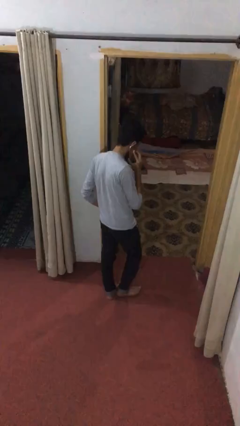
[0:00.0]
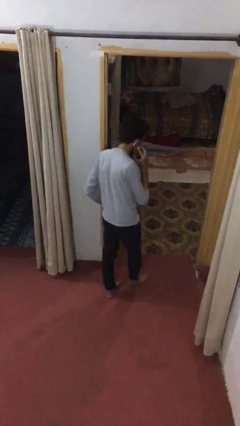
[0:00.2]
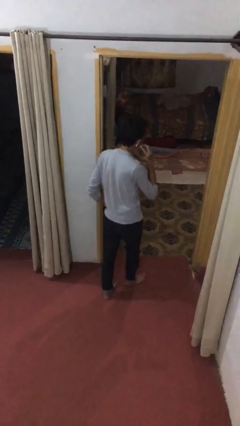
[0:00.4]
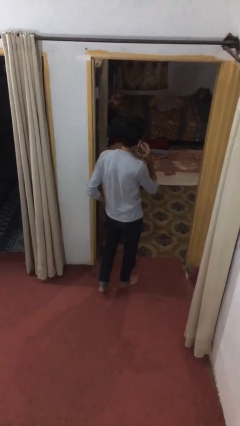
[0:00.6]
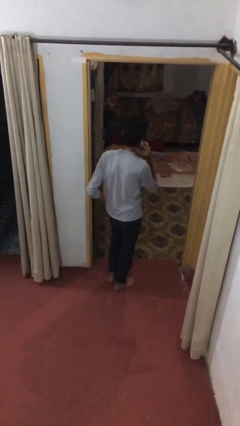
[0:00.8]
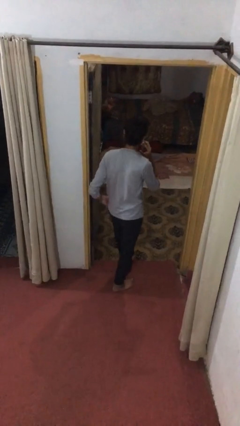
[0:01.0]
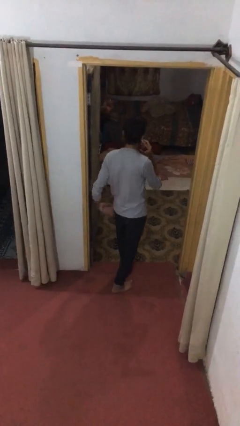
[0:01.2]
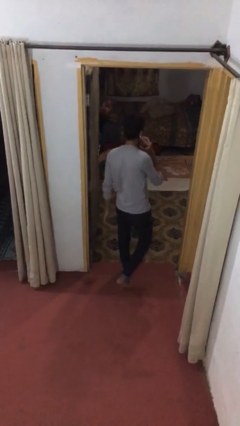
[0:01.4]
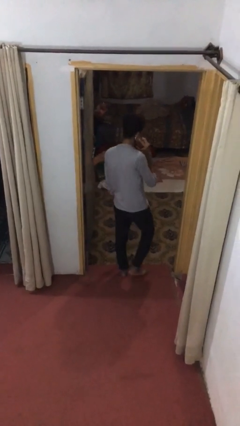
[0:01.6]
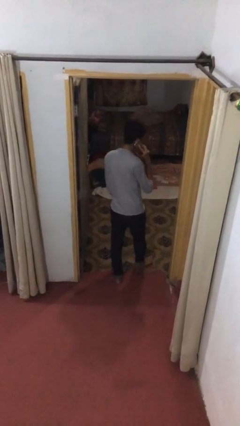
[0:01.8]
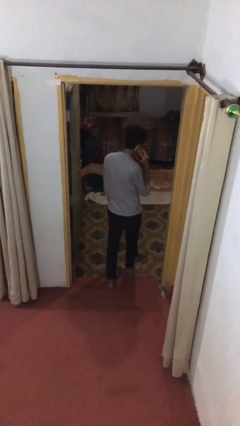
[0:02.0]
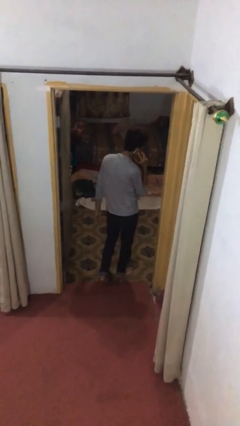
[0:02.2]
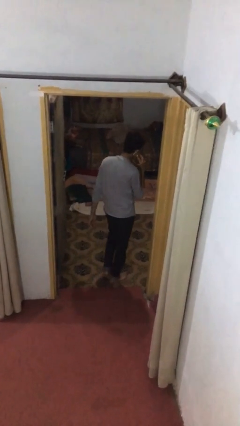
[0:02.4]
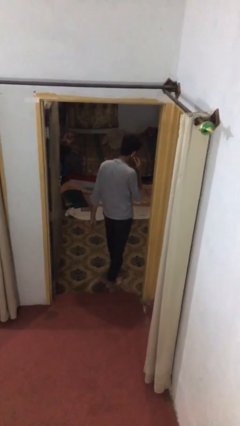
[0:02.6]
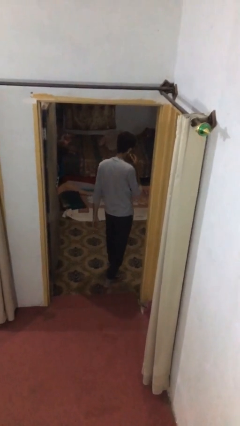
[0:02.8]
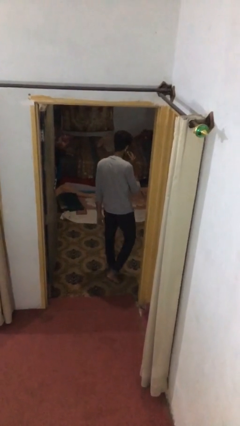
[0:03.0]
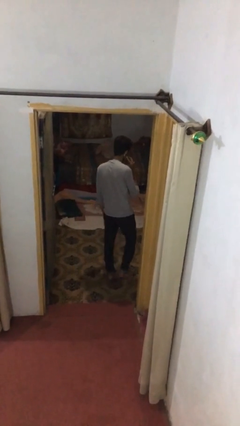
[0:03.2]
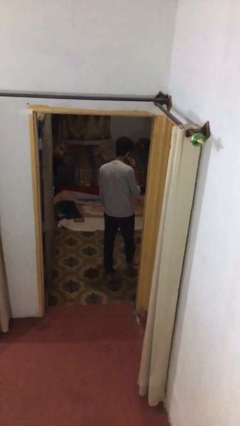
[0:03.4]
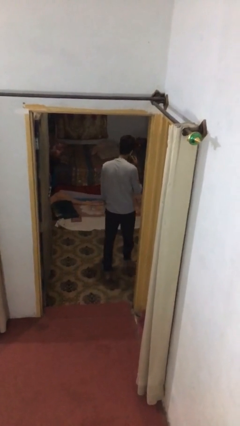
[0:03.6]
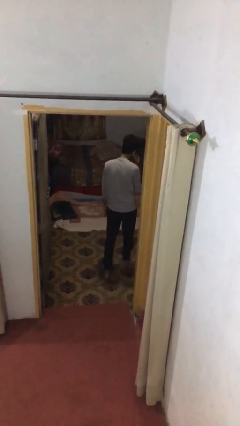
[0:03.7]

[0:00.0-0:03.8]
person exits scene through structure

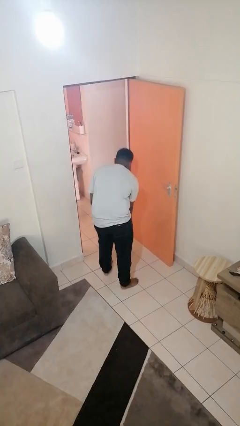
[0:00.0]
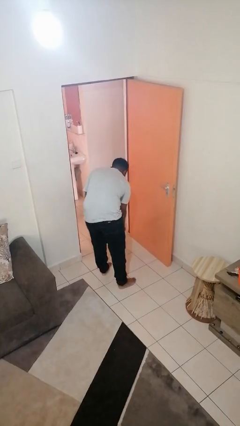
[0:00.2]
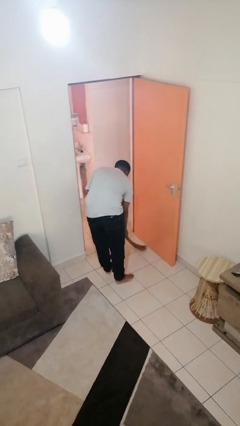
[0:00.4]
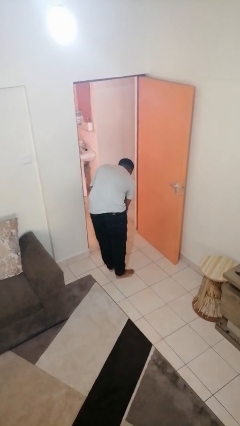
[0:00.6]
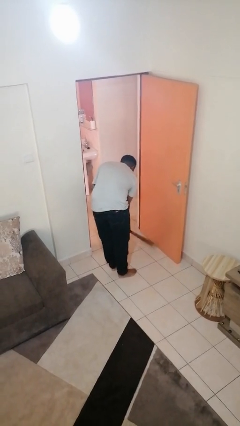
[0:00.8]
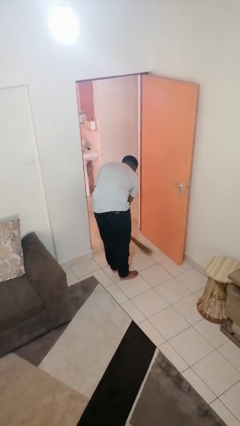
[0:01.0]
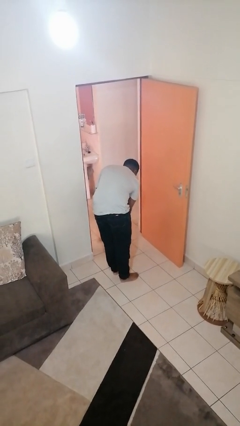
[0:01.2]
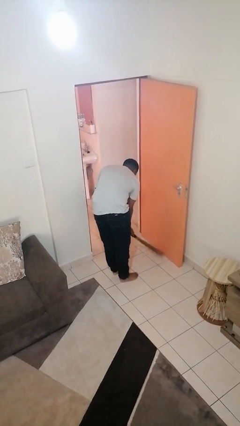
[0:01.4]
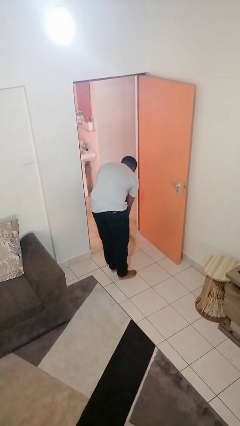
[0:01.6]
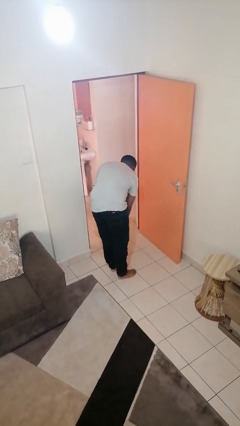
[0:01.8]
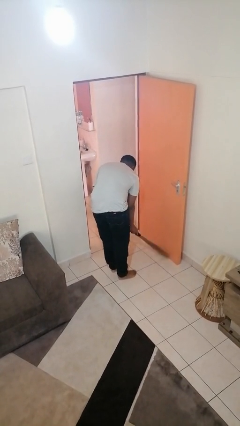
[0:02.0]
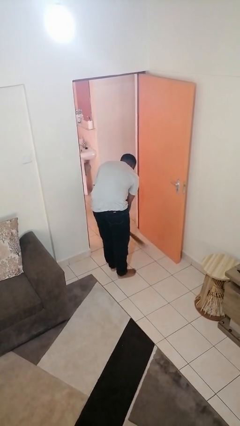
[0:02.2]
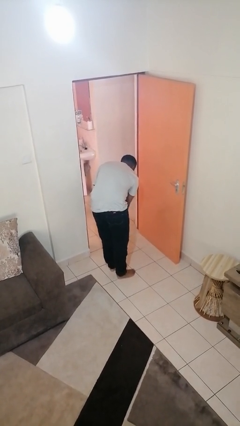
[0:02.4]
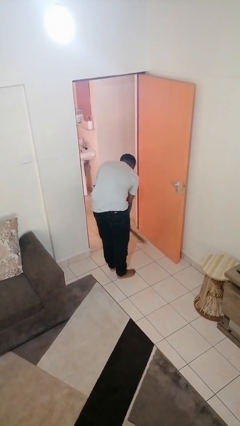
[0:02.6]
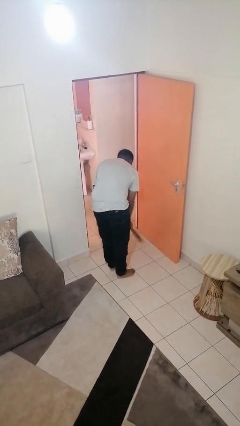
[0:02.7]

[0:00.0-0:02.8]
person sweeps floor

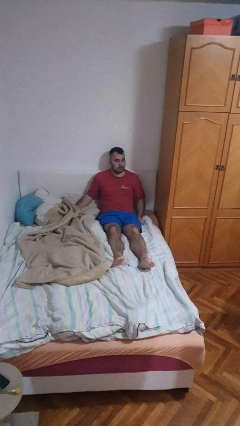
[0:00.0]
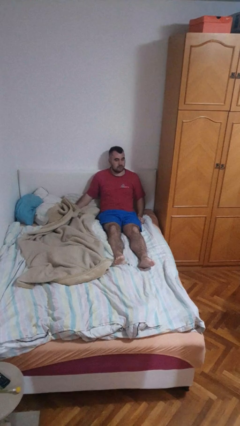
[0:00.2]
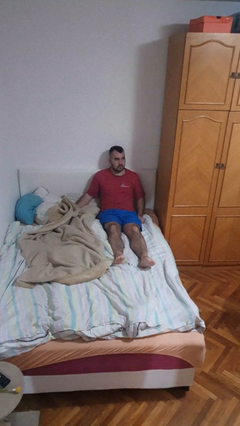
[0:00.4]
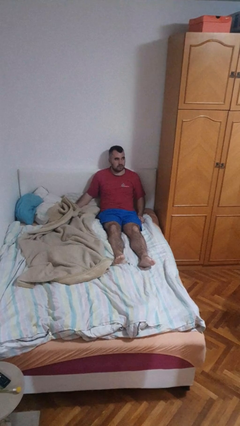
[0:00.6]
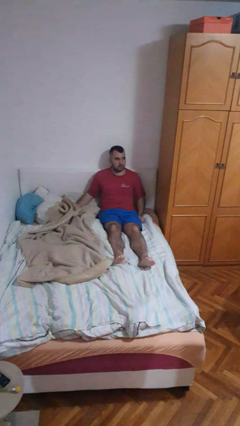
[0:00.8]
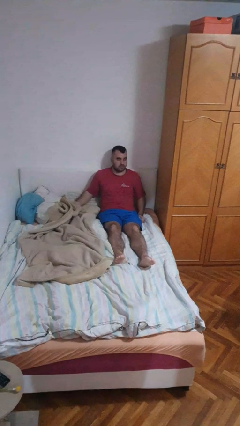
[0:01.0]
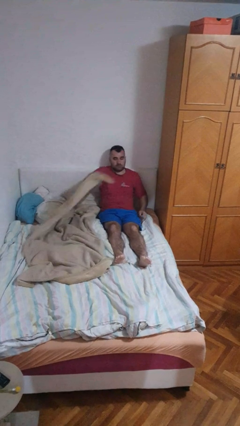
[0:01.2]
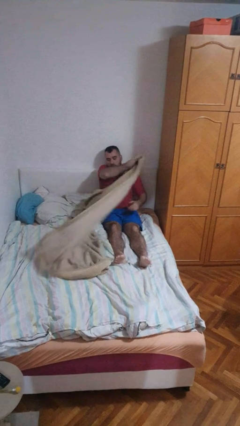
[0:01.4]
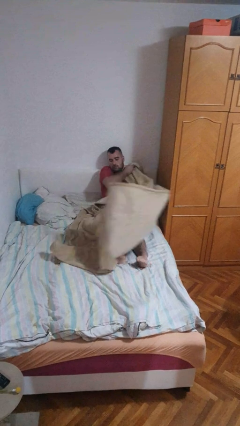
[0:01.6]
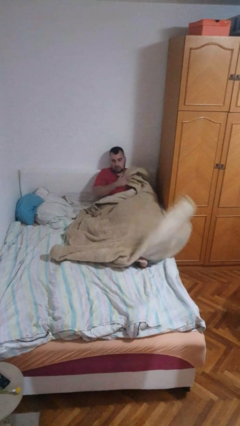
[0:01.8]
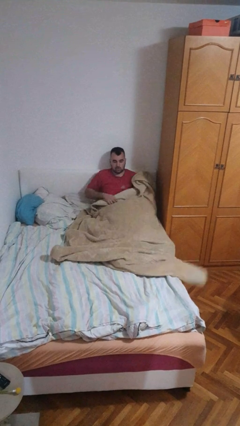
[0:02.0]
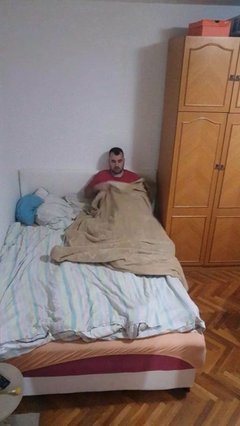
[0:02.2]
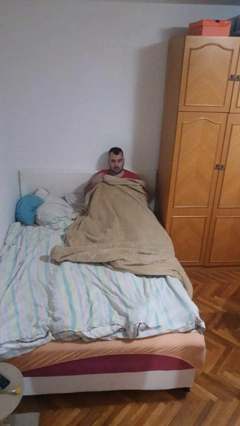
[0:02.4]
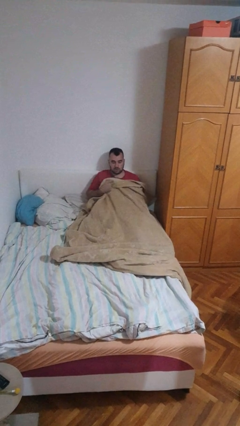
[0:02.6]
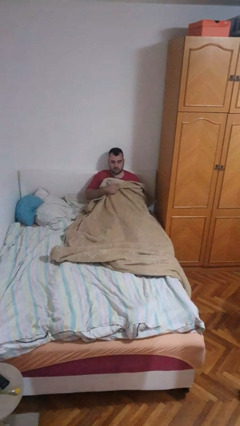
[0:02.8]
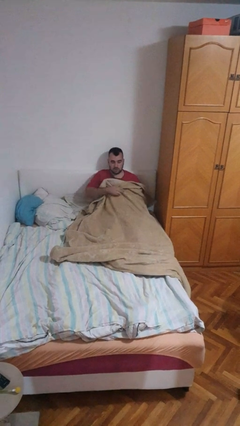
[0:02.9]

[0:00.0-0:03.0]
person covers with blanket

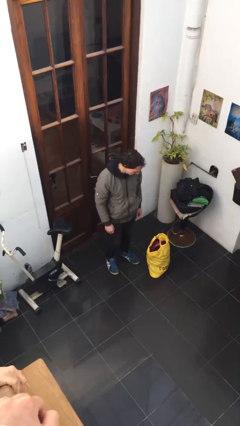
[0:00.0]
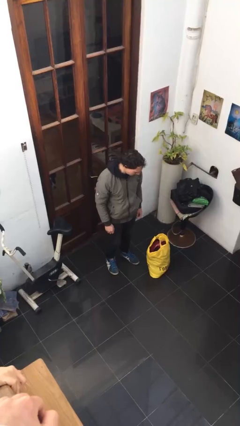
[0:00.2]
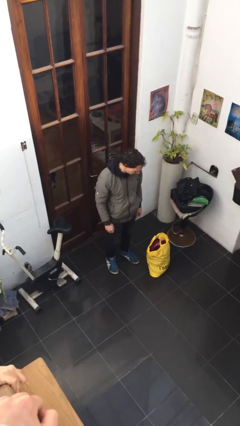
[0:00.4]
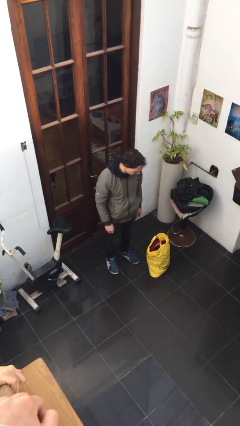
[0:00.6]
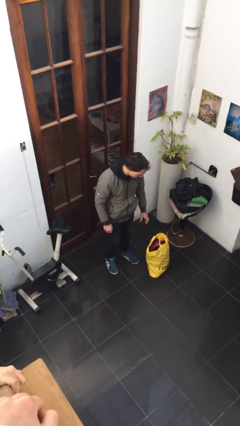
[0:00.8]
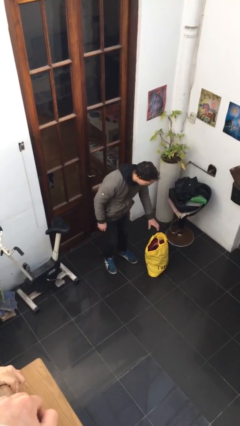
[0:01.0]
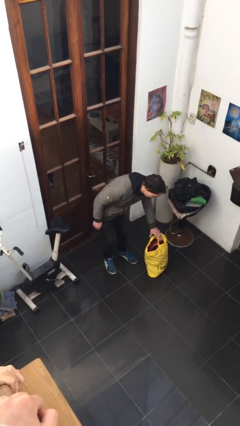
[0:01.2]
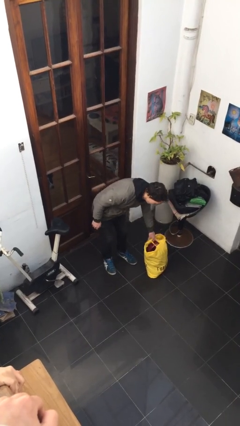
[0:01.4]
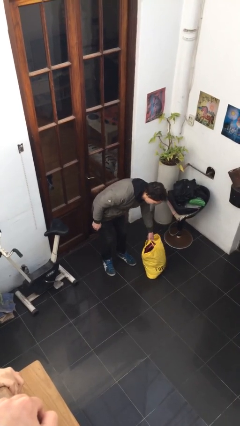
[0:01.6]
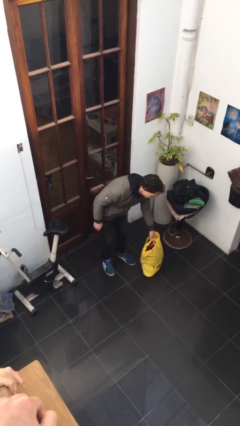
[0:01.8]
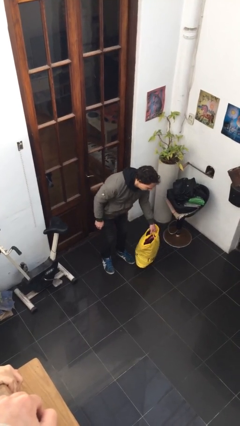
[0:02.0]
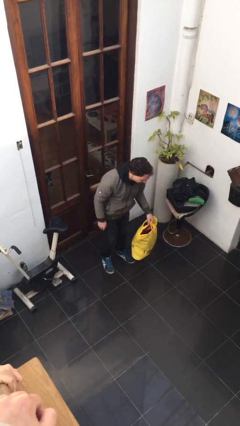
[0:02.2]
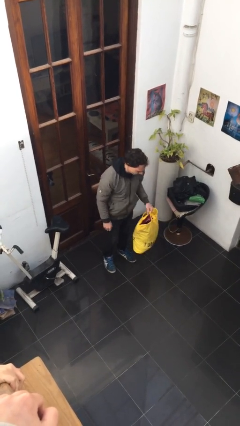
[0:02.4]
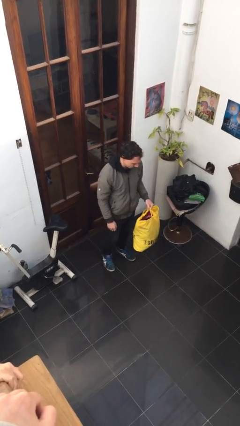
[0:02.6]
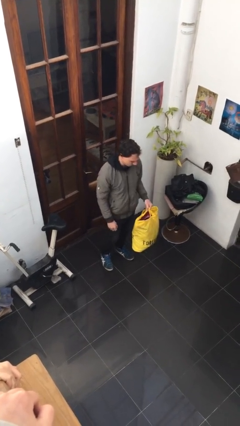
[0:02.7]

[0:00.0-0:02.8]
person picks up object from floor

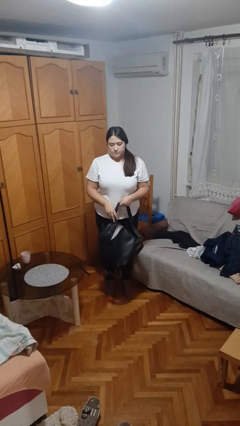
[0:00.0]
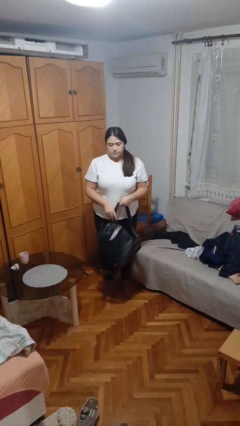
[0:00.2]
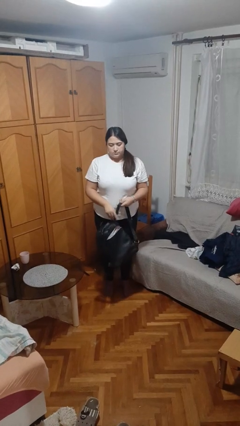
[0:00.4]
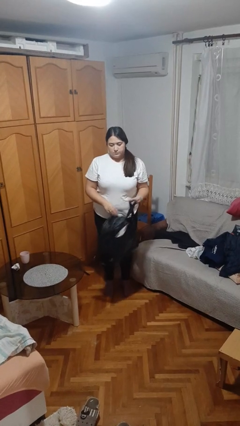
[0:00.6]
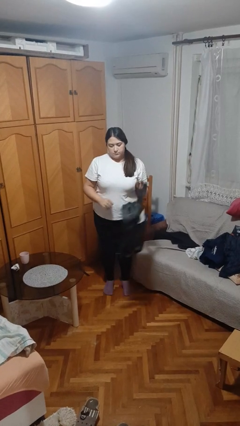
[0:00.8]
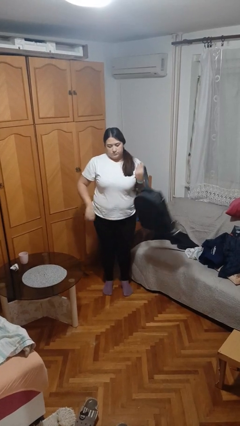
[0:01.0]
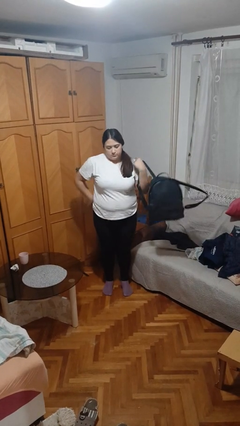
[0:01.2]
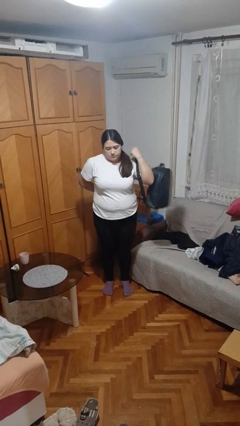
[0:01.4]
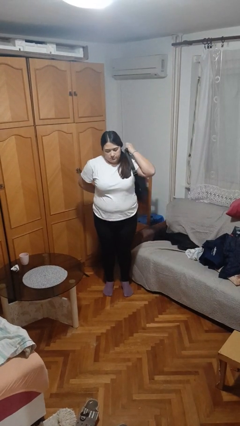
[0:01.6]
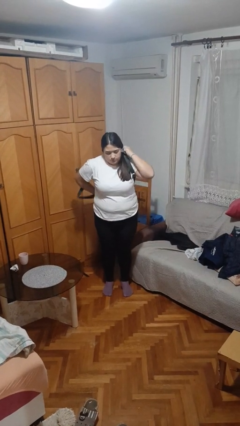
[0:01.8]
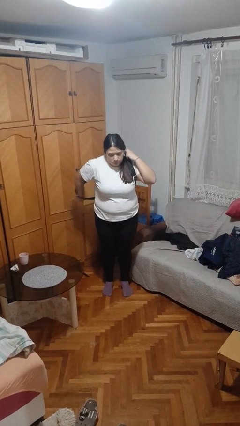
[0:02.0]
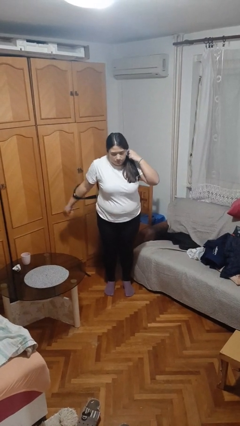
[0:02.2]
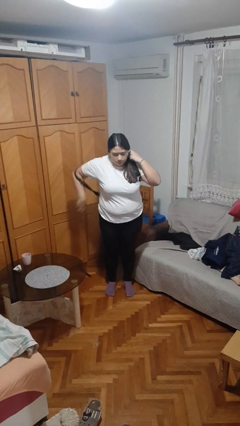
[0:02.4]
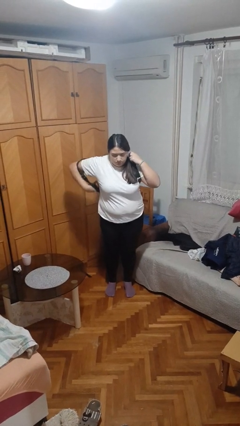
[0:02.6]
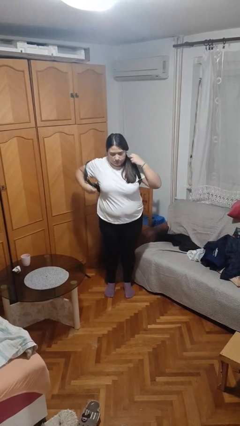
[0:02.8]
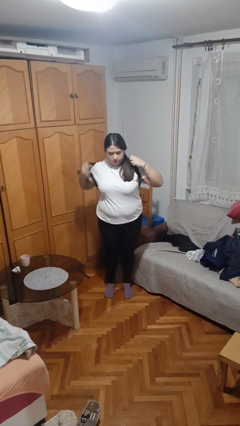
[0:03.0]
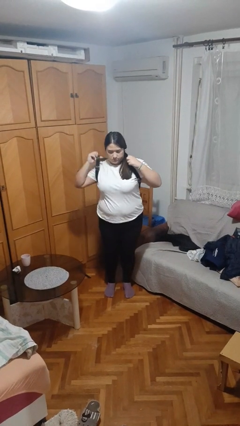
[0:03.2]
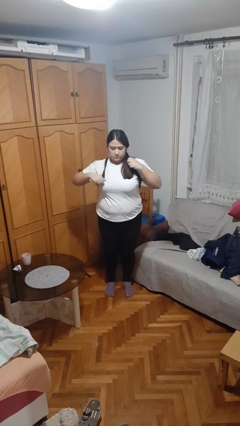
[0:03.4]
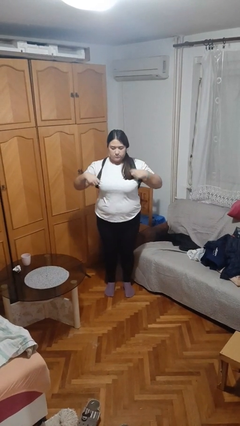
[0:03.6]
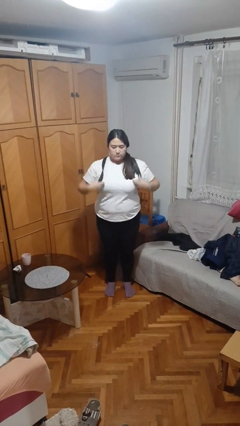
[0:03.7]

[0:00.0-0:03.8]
person puts on backpack

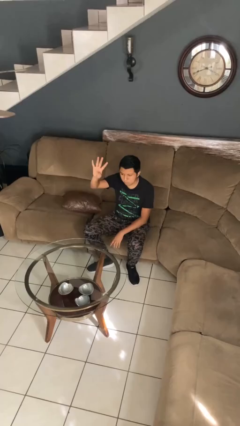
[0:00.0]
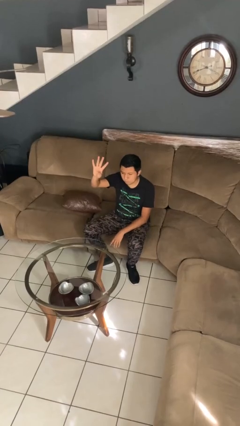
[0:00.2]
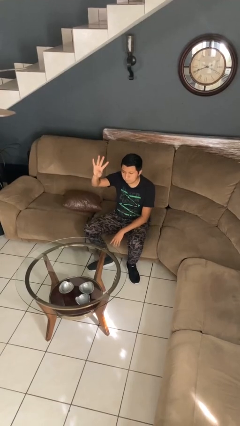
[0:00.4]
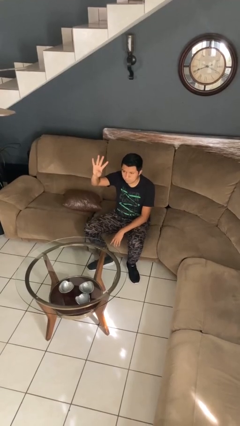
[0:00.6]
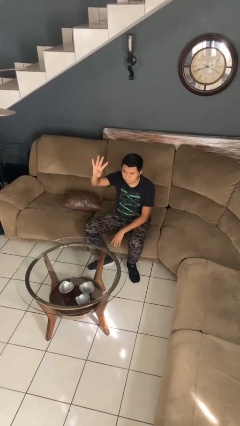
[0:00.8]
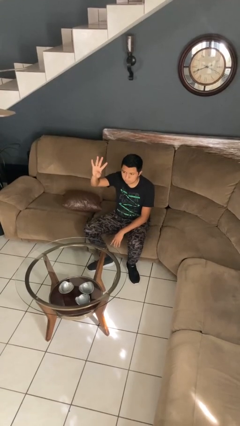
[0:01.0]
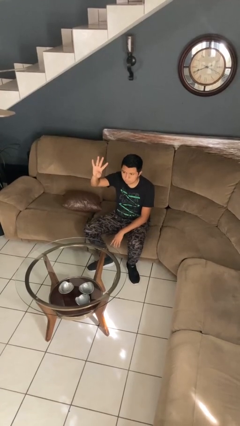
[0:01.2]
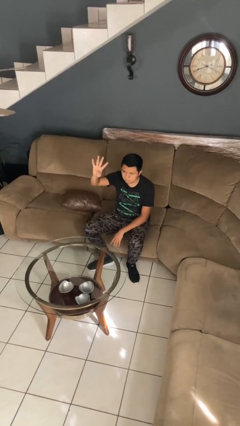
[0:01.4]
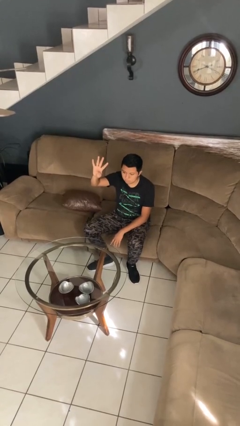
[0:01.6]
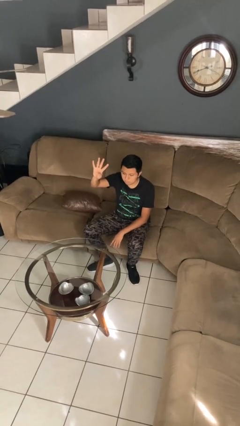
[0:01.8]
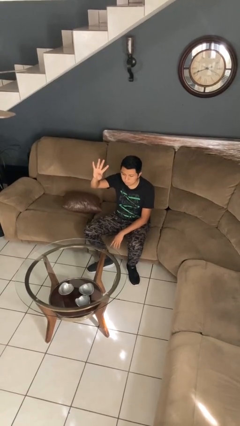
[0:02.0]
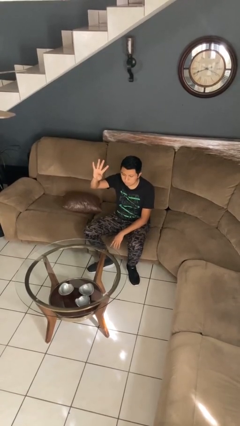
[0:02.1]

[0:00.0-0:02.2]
person gestures number four
